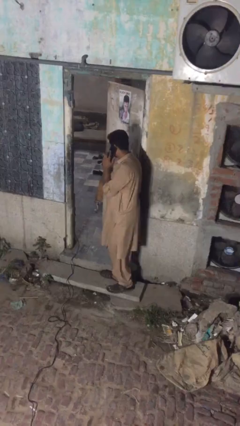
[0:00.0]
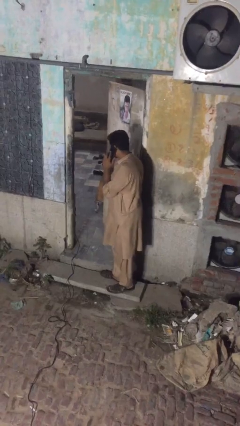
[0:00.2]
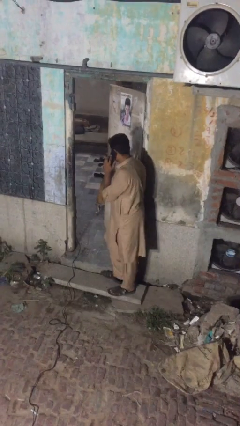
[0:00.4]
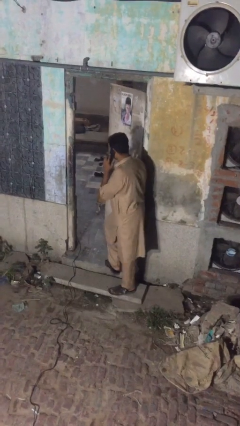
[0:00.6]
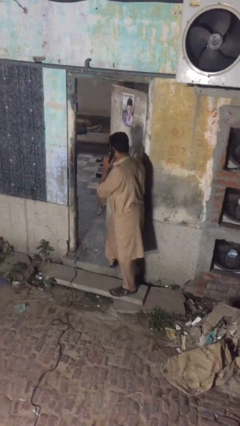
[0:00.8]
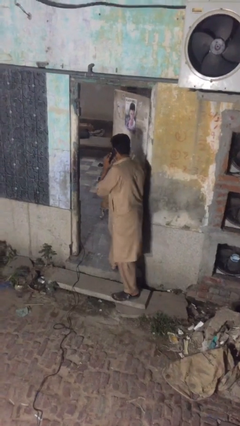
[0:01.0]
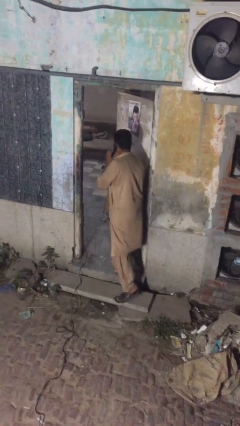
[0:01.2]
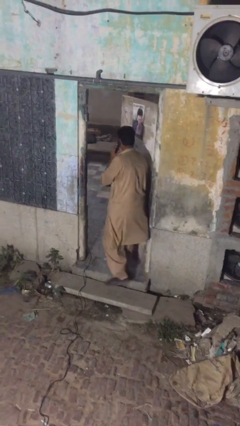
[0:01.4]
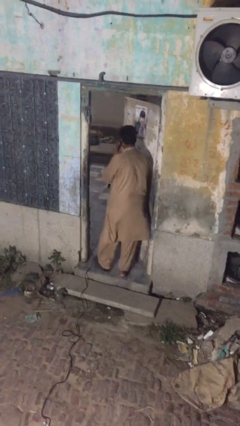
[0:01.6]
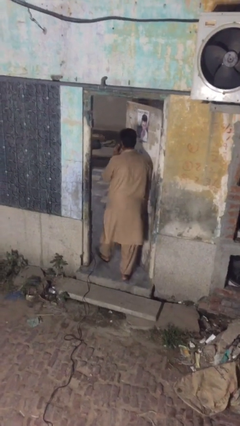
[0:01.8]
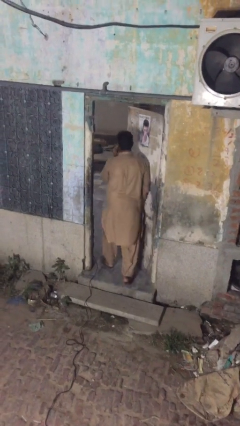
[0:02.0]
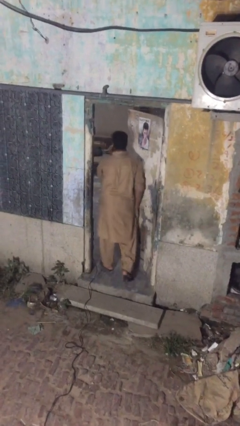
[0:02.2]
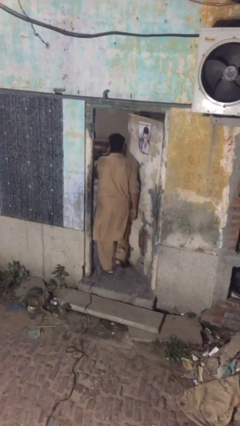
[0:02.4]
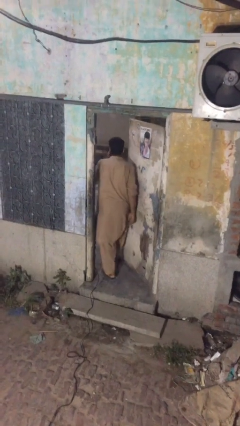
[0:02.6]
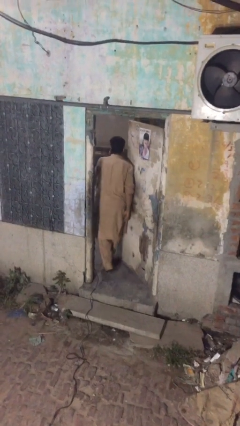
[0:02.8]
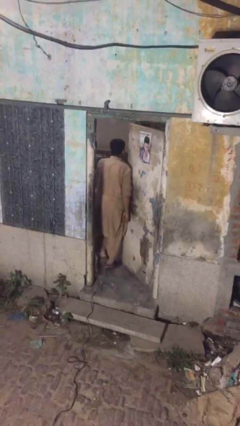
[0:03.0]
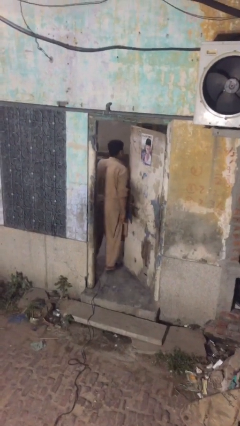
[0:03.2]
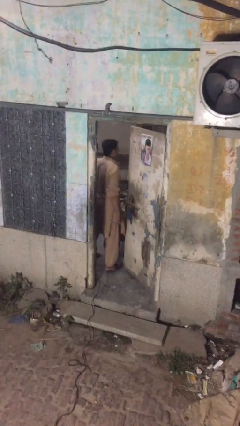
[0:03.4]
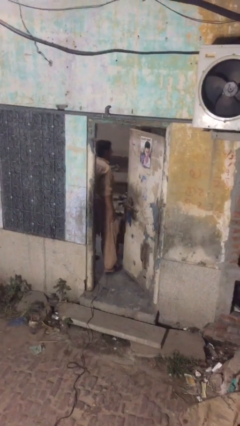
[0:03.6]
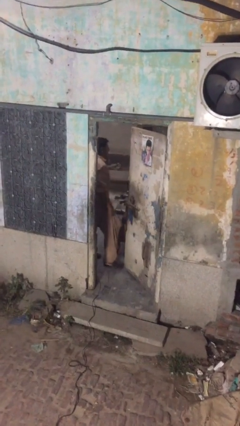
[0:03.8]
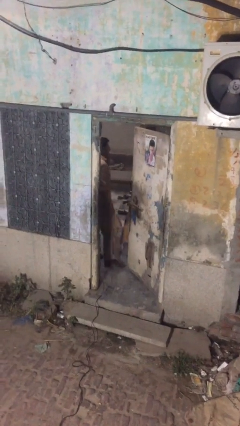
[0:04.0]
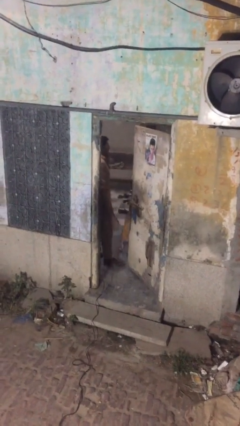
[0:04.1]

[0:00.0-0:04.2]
person exits scene through structure

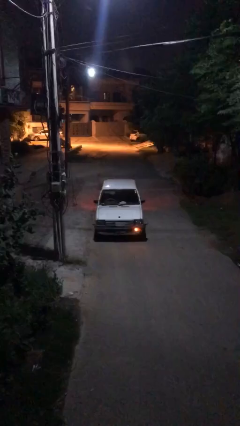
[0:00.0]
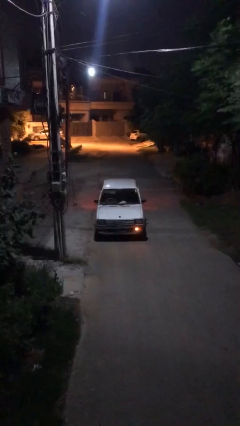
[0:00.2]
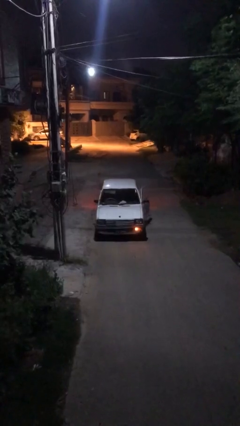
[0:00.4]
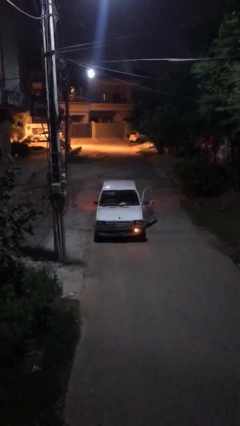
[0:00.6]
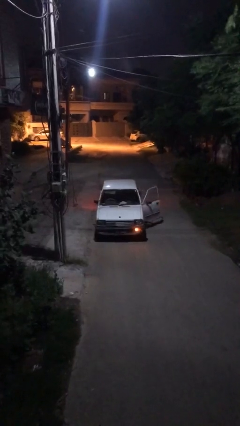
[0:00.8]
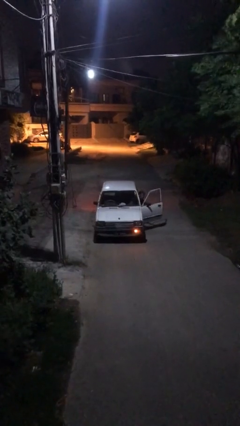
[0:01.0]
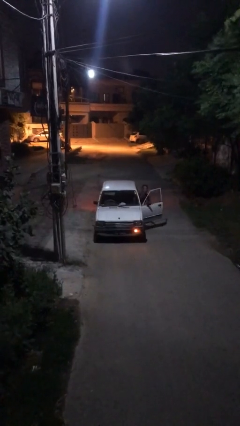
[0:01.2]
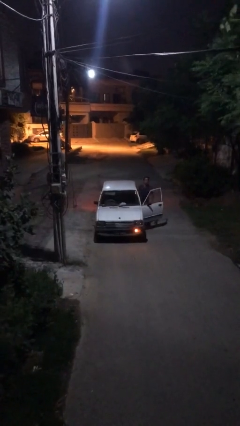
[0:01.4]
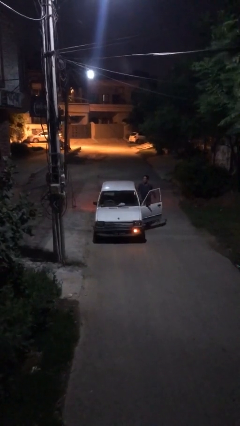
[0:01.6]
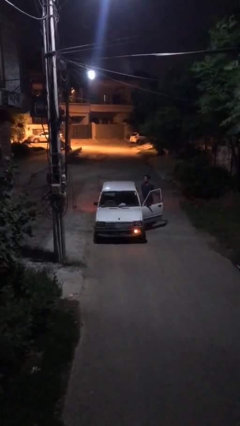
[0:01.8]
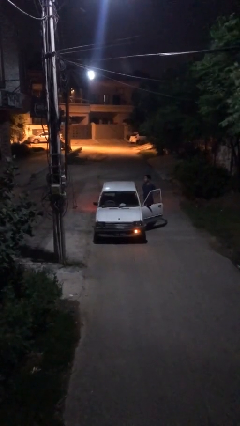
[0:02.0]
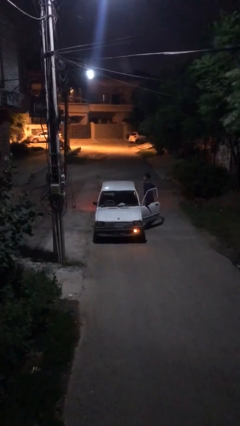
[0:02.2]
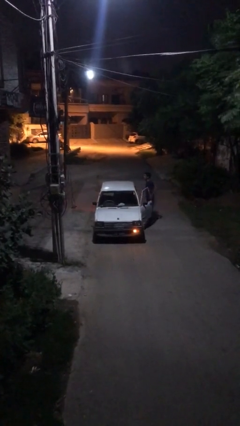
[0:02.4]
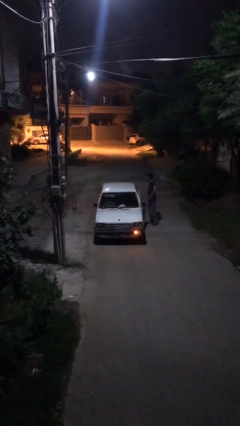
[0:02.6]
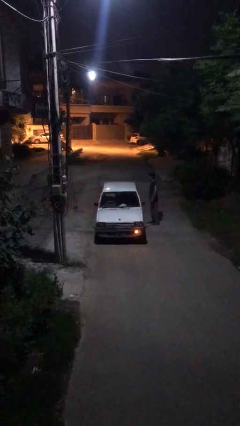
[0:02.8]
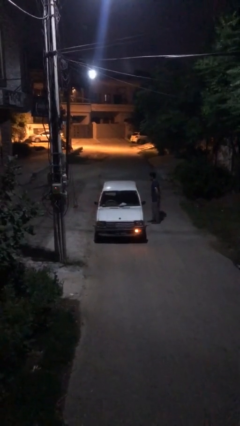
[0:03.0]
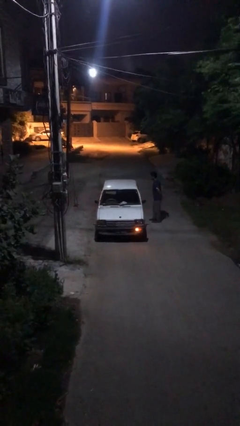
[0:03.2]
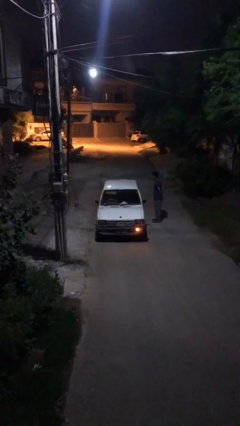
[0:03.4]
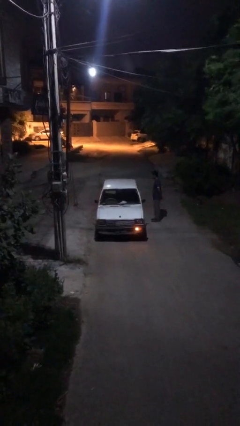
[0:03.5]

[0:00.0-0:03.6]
car drops off person

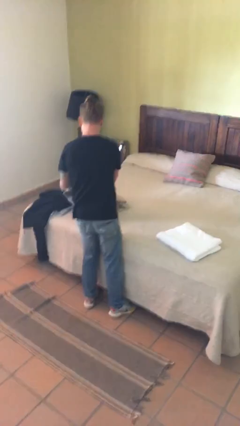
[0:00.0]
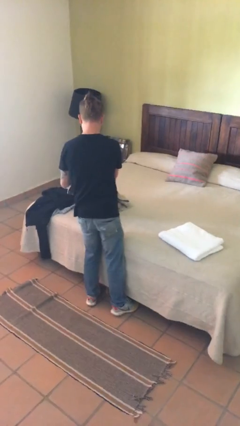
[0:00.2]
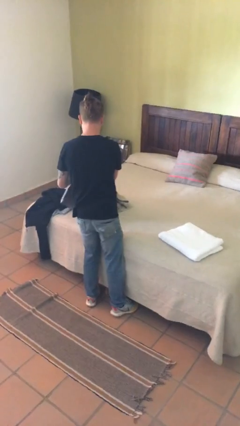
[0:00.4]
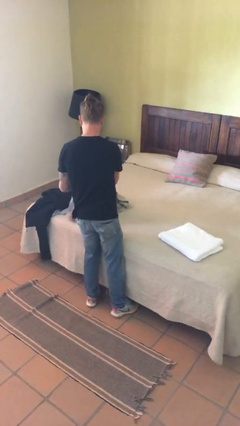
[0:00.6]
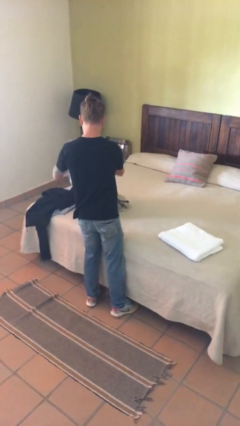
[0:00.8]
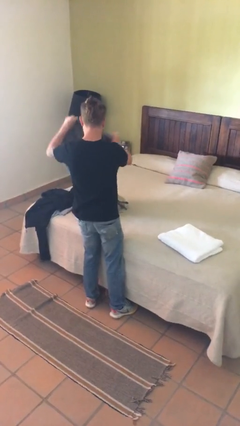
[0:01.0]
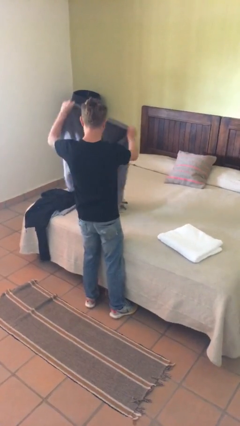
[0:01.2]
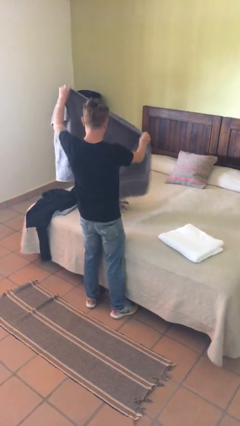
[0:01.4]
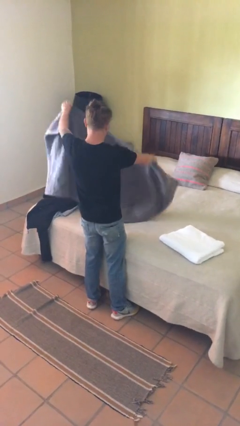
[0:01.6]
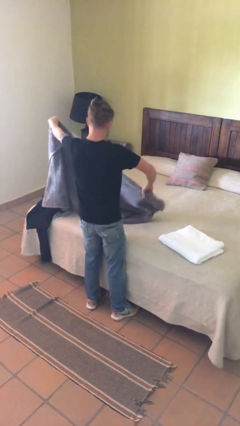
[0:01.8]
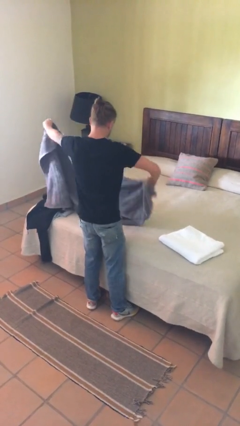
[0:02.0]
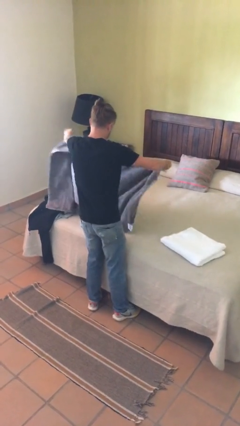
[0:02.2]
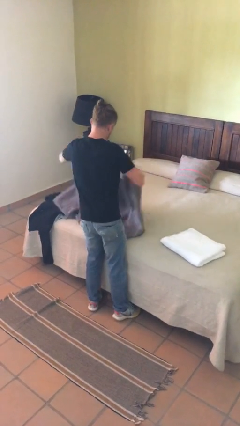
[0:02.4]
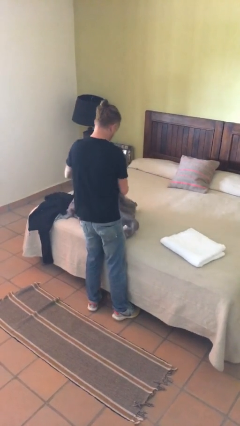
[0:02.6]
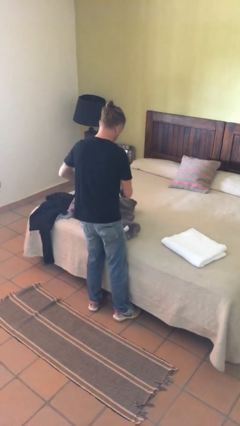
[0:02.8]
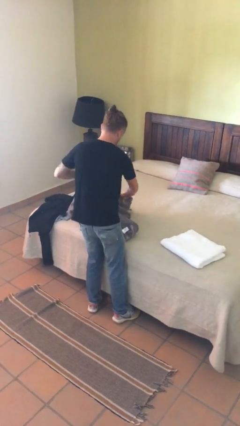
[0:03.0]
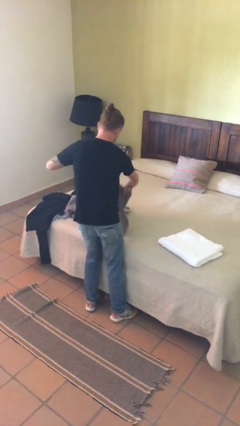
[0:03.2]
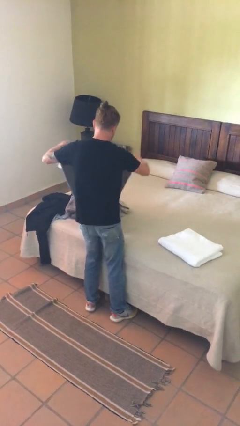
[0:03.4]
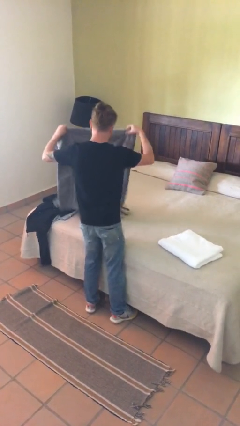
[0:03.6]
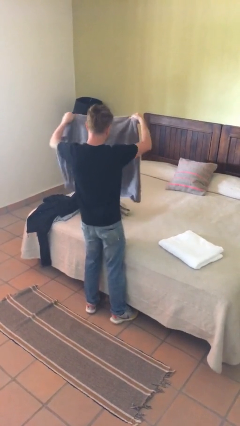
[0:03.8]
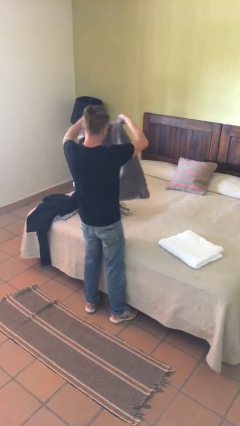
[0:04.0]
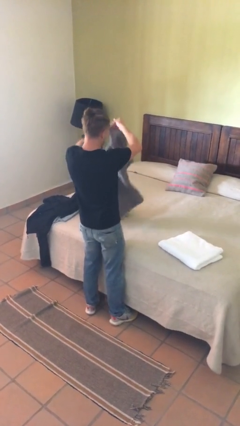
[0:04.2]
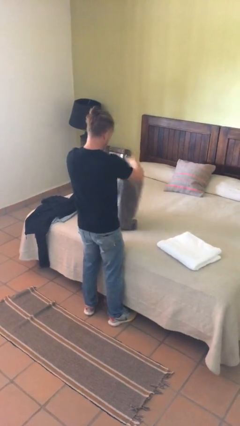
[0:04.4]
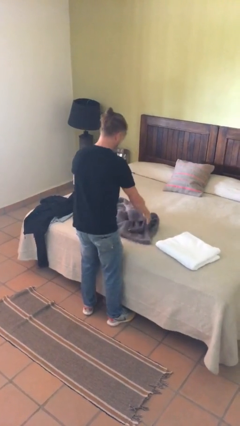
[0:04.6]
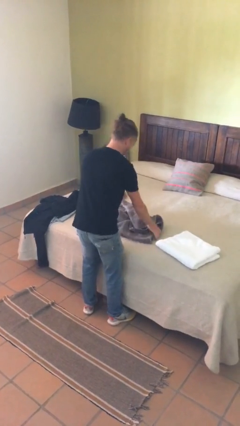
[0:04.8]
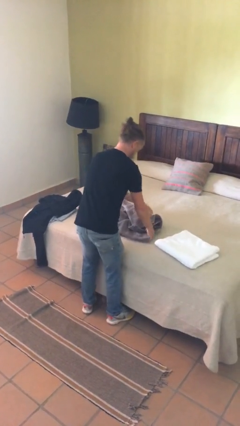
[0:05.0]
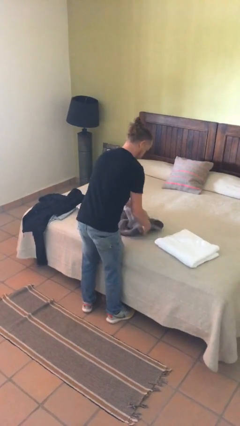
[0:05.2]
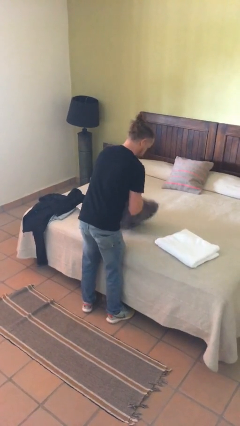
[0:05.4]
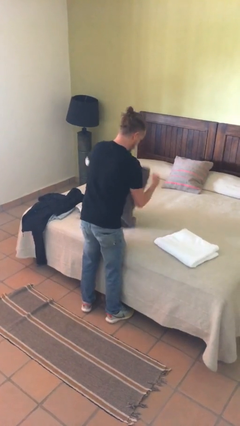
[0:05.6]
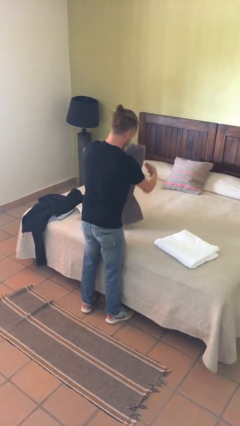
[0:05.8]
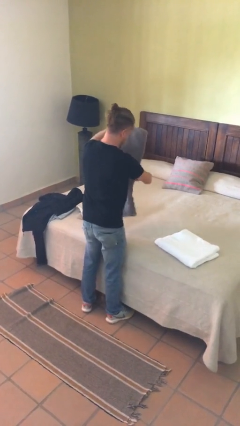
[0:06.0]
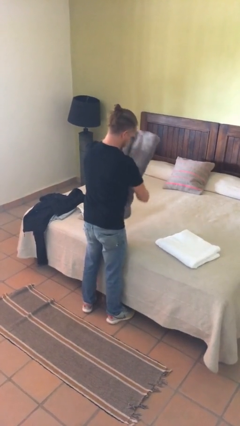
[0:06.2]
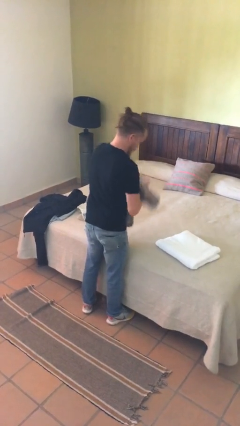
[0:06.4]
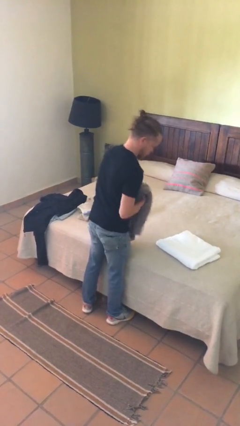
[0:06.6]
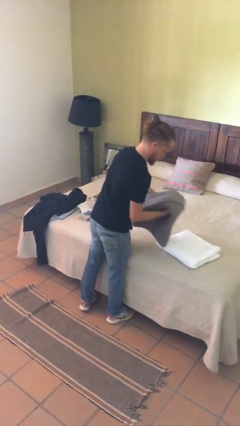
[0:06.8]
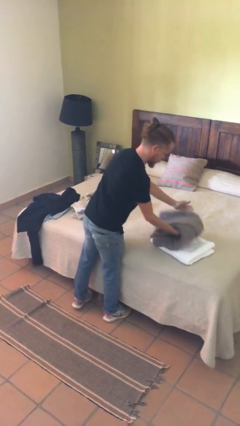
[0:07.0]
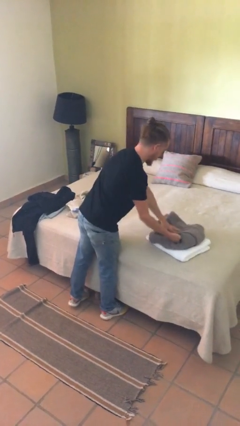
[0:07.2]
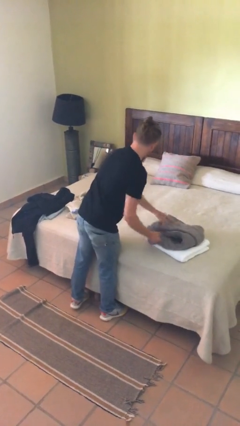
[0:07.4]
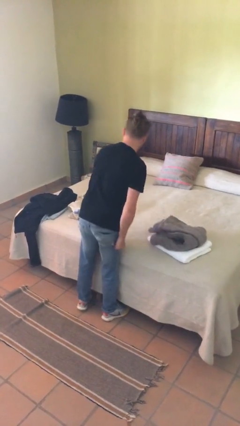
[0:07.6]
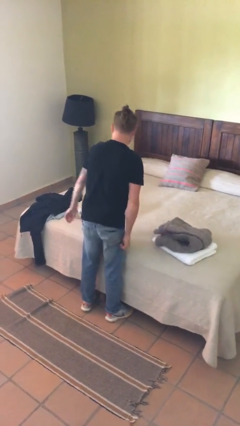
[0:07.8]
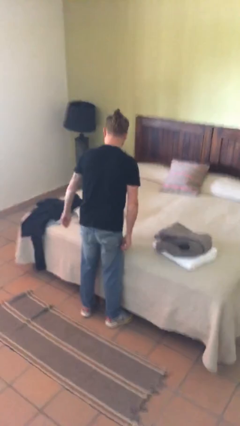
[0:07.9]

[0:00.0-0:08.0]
person folds towel

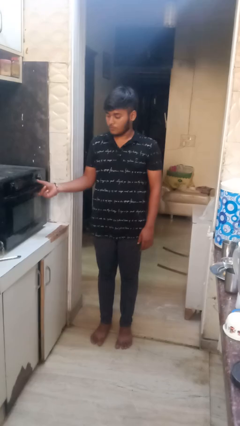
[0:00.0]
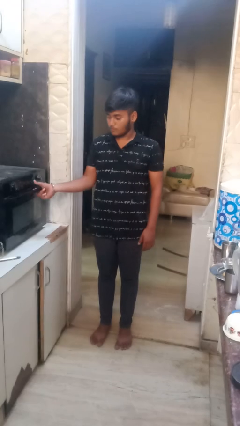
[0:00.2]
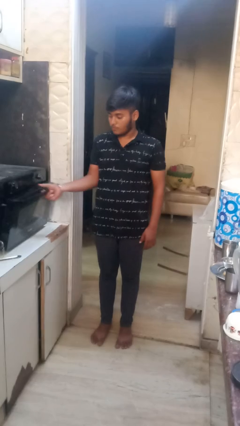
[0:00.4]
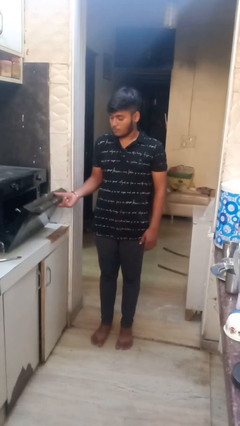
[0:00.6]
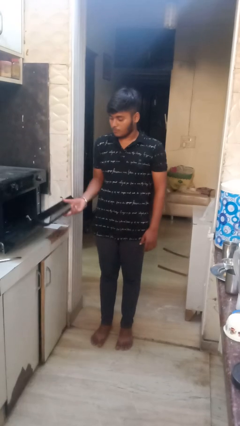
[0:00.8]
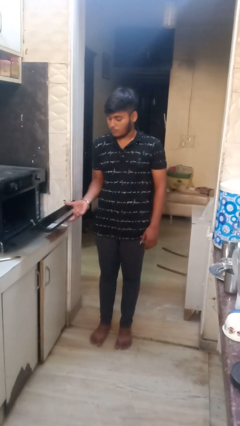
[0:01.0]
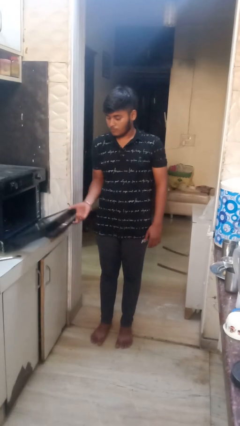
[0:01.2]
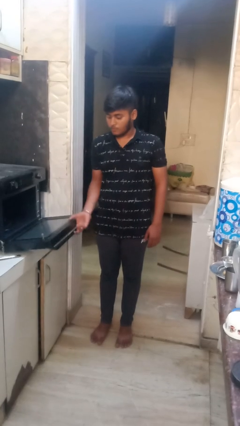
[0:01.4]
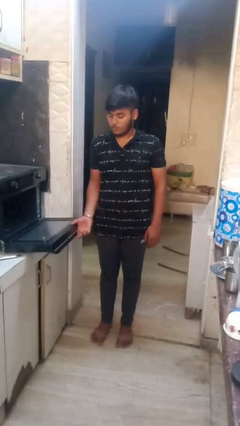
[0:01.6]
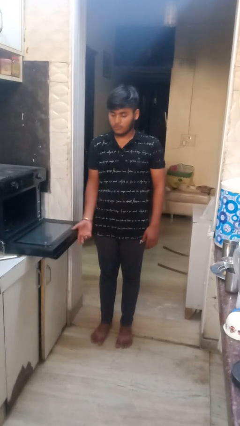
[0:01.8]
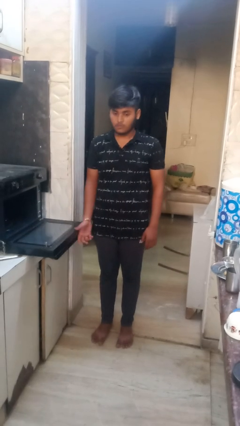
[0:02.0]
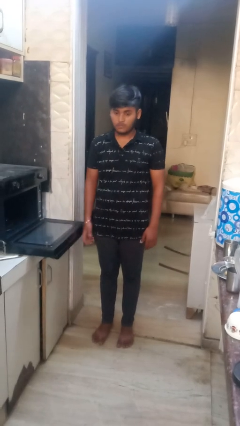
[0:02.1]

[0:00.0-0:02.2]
person opens oven door
